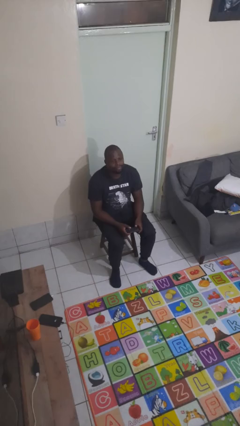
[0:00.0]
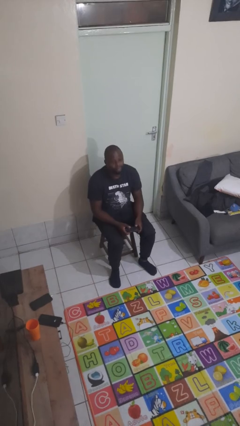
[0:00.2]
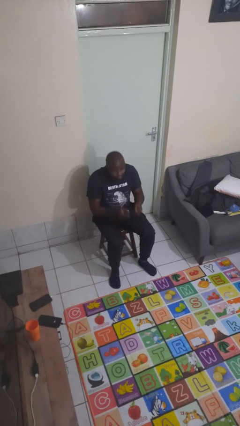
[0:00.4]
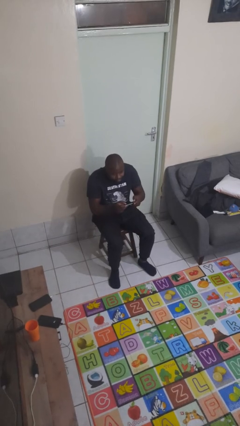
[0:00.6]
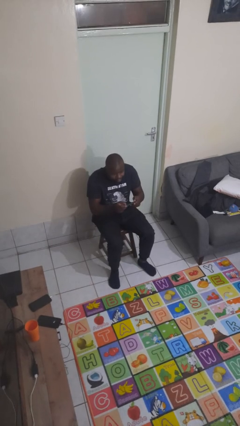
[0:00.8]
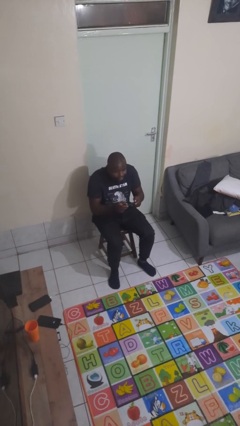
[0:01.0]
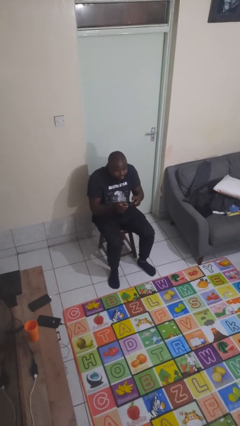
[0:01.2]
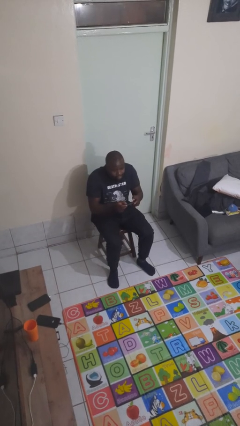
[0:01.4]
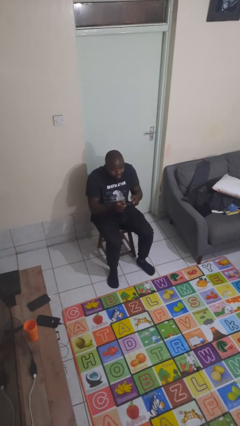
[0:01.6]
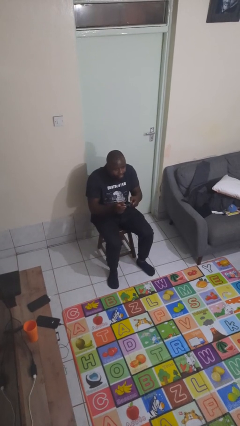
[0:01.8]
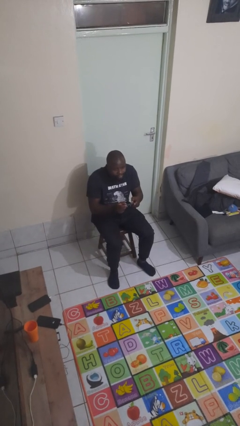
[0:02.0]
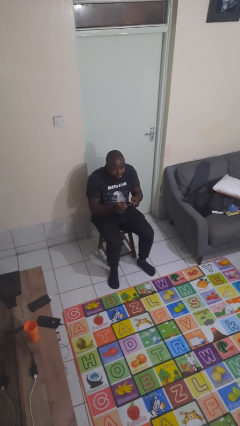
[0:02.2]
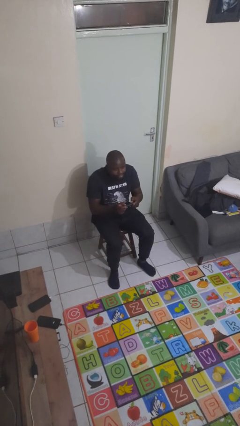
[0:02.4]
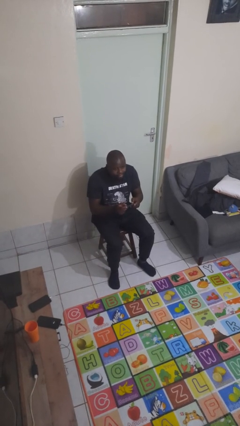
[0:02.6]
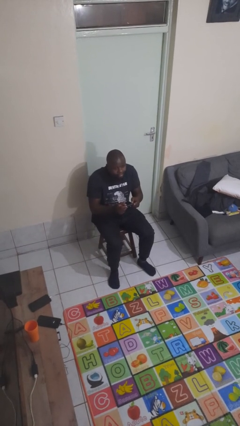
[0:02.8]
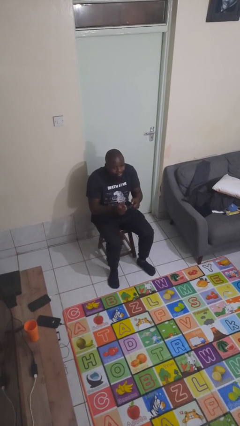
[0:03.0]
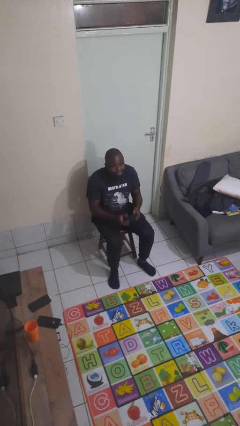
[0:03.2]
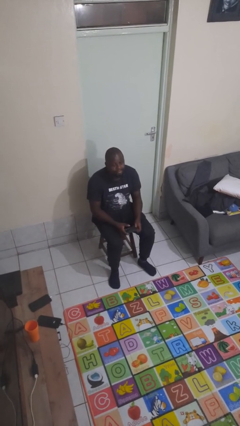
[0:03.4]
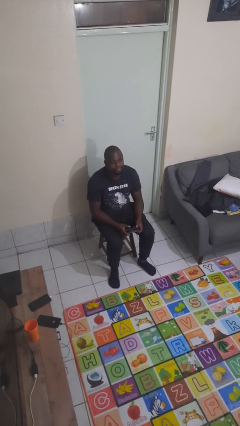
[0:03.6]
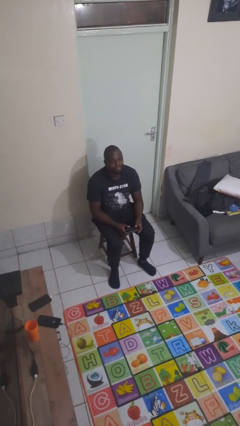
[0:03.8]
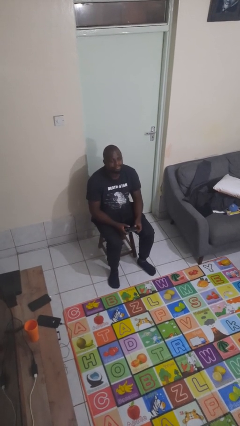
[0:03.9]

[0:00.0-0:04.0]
person interacts with handheld game

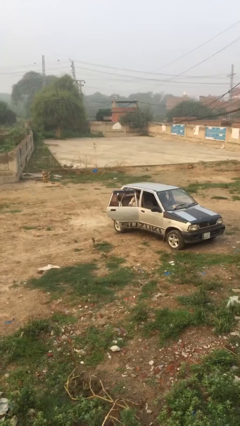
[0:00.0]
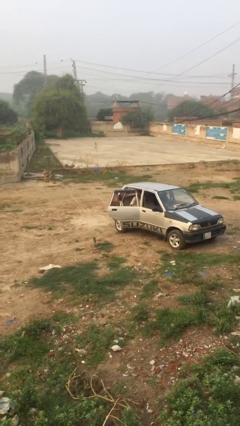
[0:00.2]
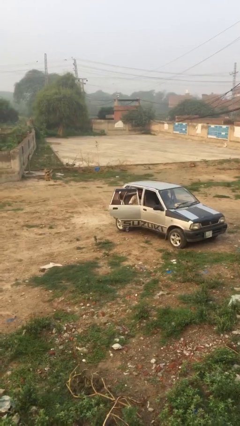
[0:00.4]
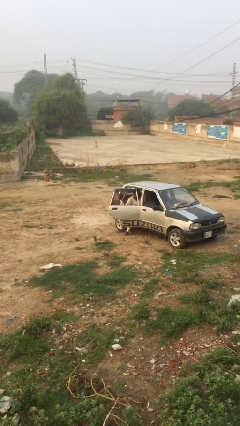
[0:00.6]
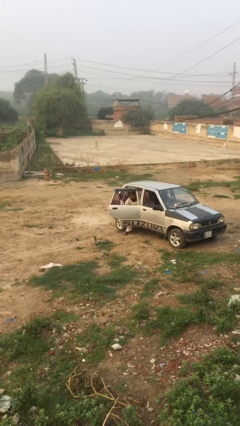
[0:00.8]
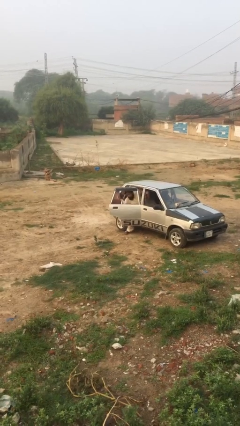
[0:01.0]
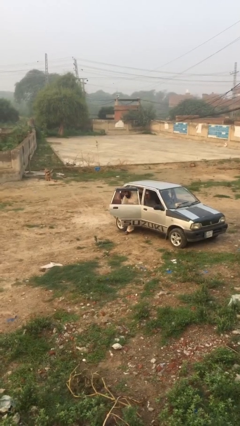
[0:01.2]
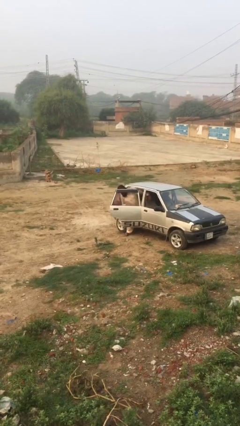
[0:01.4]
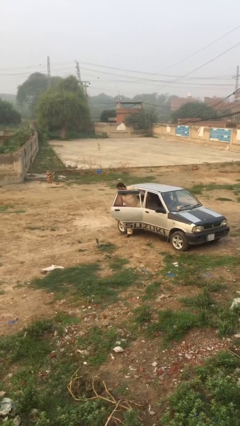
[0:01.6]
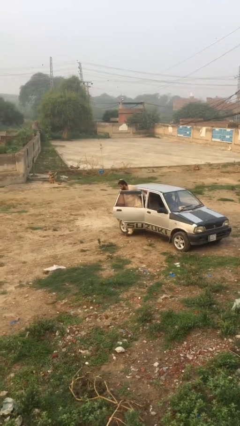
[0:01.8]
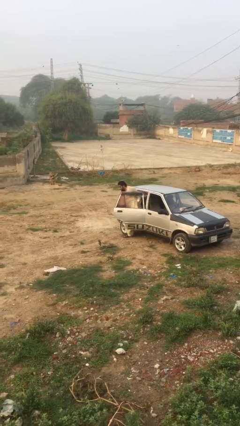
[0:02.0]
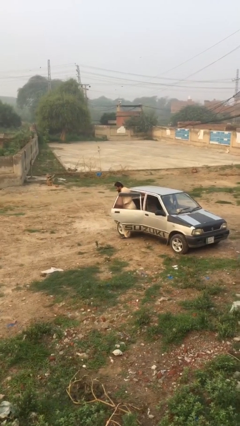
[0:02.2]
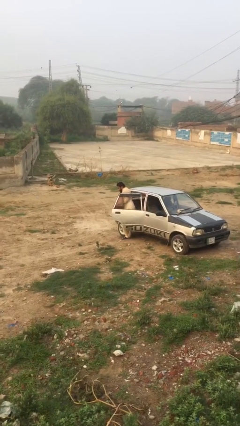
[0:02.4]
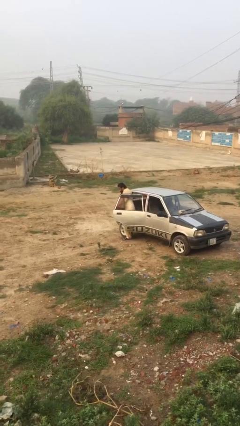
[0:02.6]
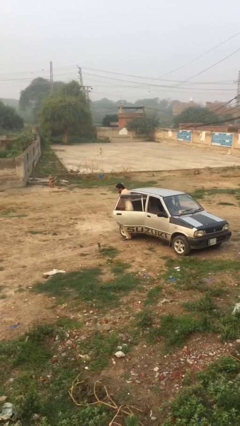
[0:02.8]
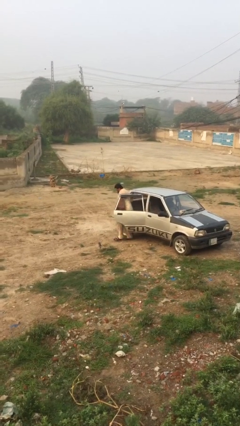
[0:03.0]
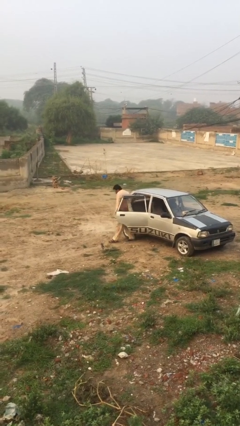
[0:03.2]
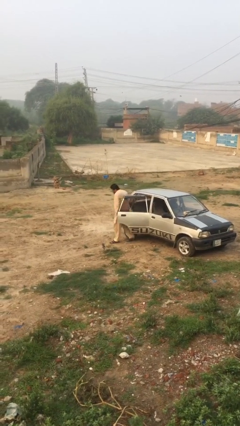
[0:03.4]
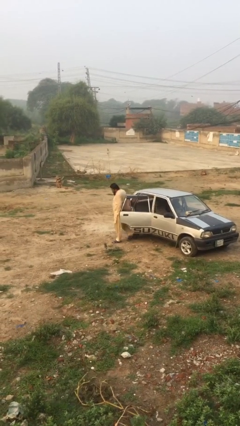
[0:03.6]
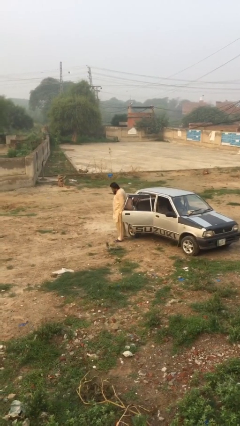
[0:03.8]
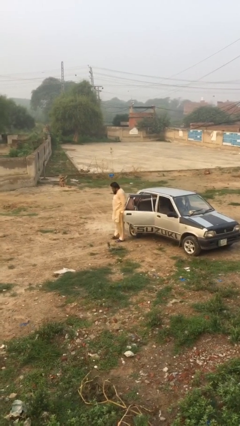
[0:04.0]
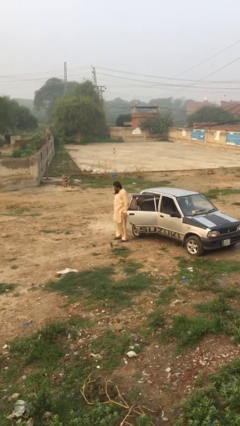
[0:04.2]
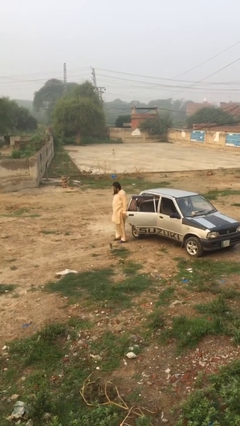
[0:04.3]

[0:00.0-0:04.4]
person exits car

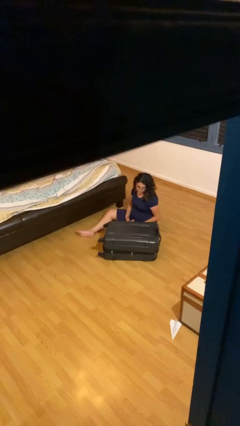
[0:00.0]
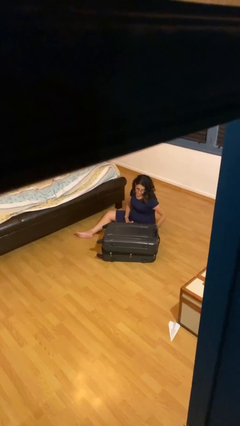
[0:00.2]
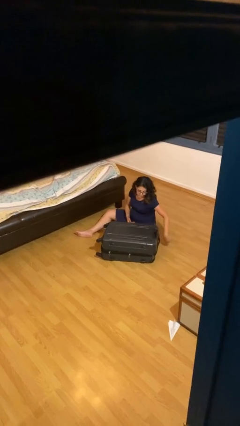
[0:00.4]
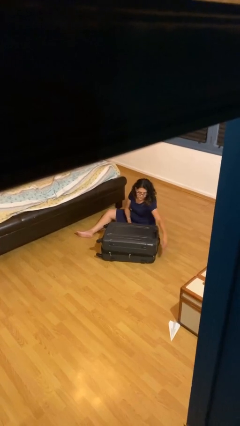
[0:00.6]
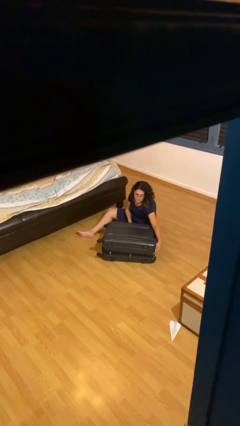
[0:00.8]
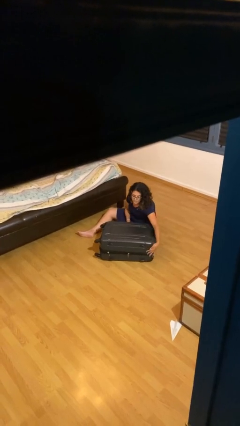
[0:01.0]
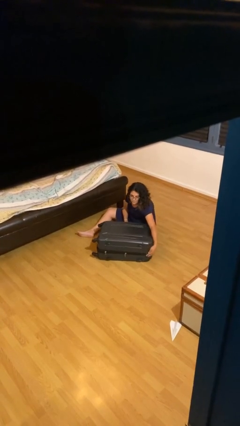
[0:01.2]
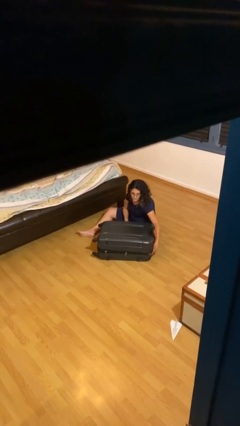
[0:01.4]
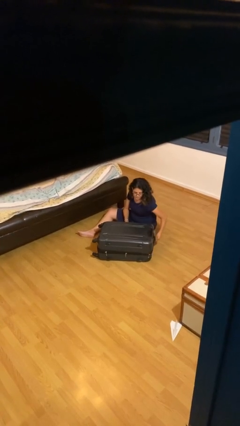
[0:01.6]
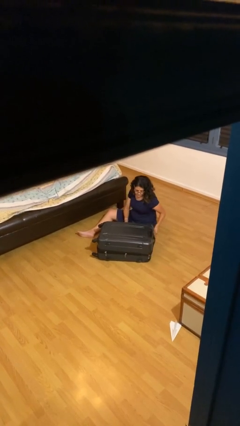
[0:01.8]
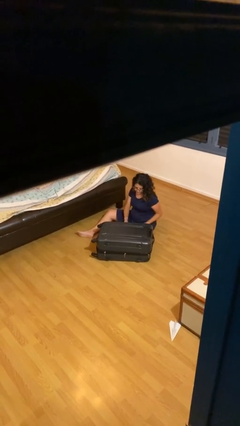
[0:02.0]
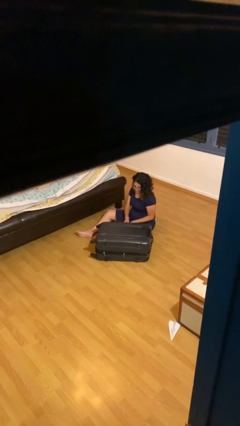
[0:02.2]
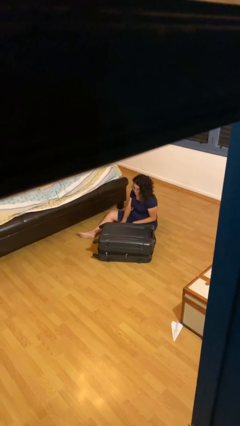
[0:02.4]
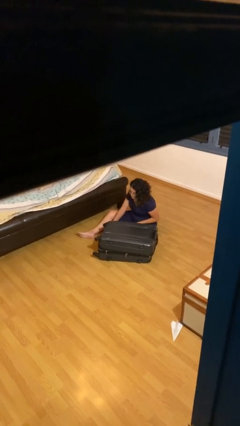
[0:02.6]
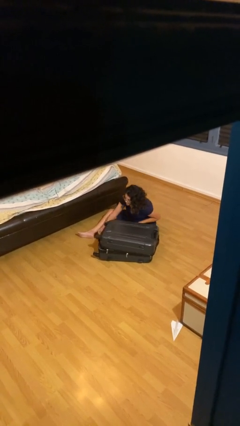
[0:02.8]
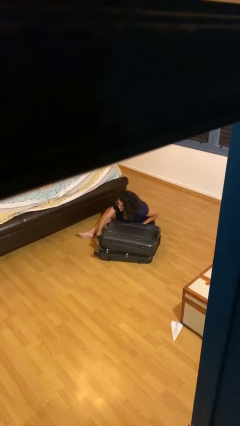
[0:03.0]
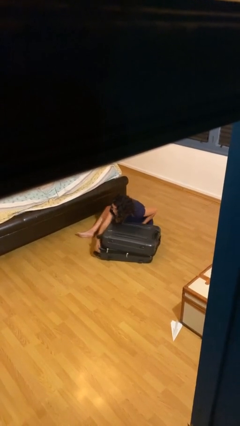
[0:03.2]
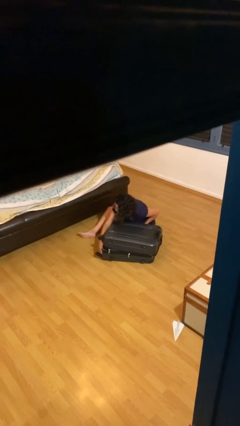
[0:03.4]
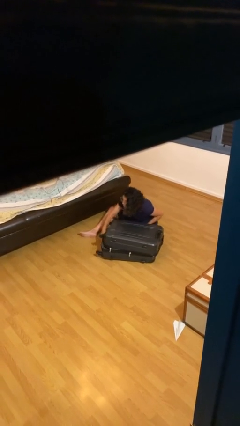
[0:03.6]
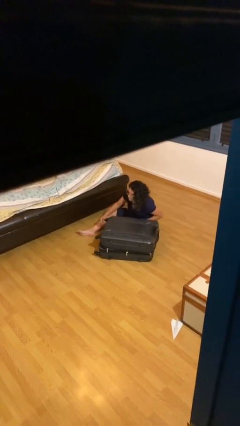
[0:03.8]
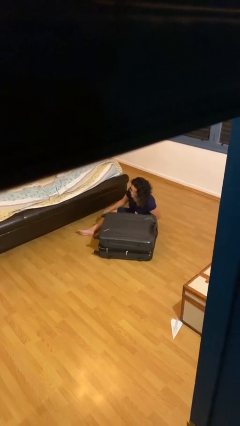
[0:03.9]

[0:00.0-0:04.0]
person opens suitcase

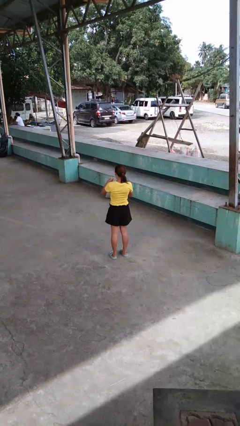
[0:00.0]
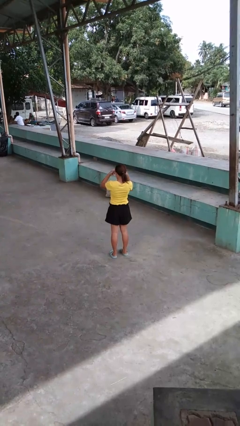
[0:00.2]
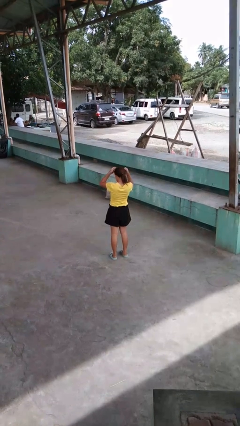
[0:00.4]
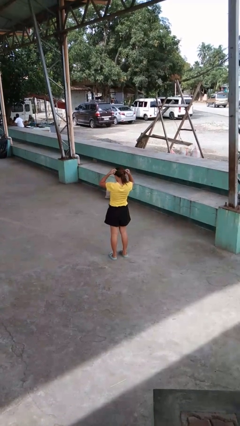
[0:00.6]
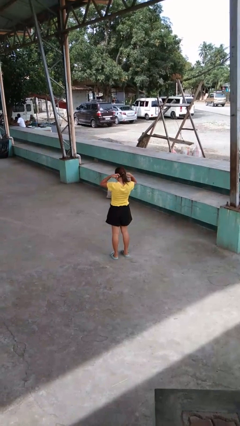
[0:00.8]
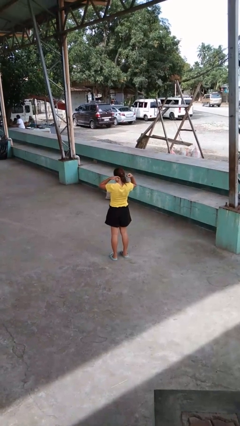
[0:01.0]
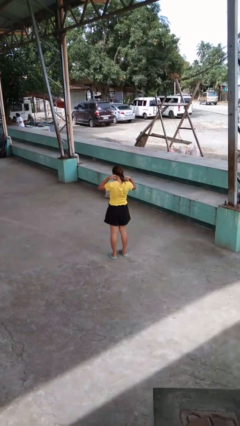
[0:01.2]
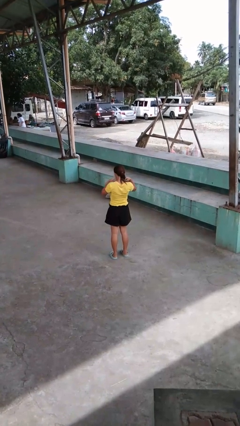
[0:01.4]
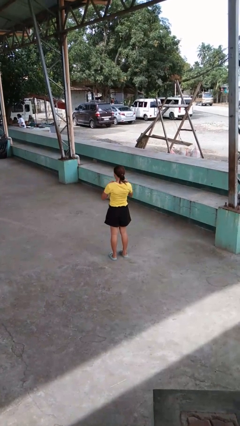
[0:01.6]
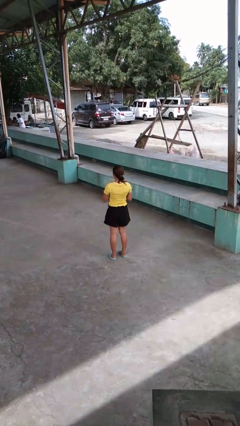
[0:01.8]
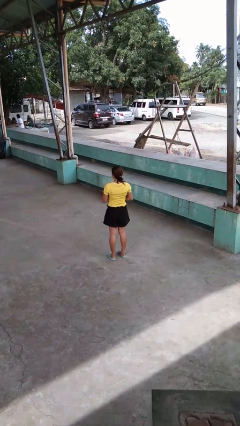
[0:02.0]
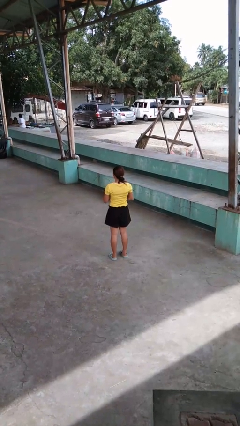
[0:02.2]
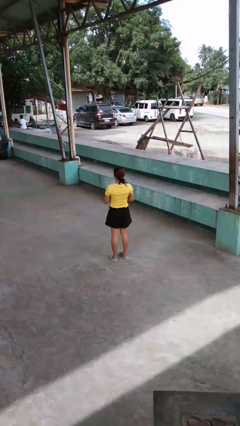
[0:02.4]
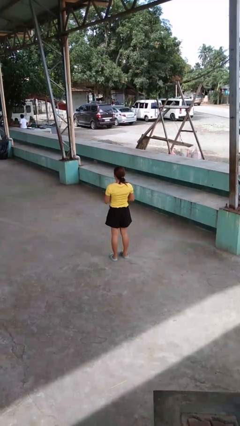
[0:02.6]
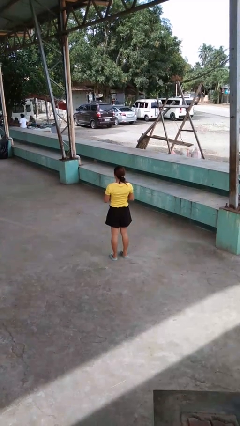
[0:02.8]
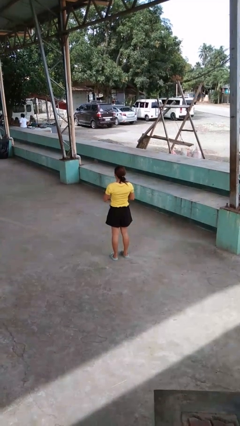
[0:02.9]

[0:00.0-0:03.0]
person puts on necklace

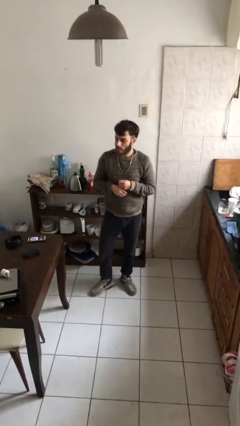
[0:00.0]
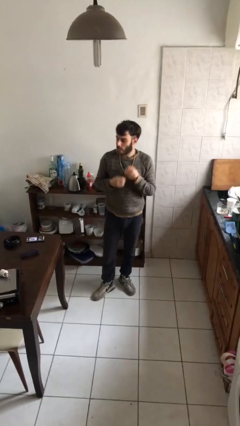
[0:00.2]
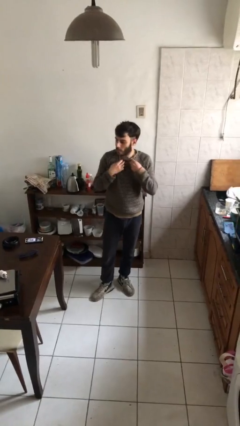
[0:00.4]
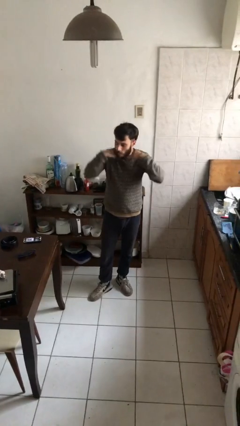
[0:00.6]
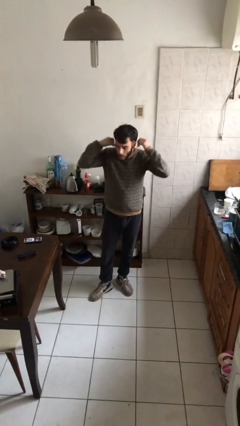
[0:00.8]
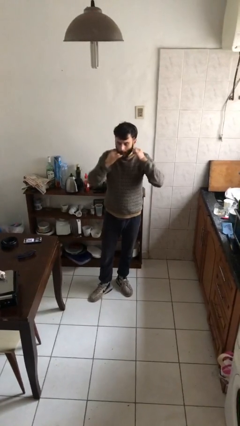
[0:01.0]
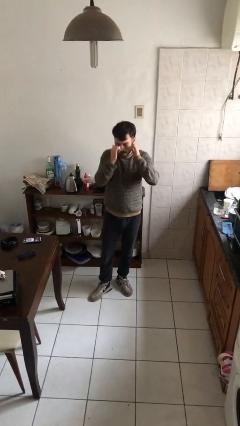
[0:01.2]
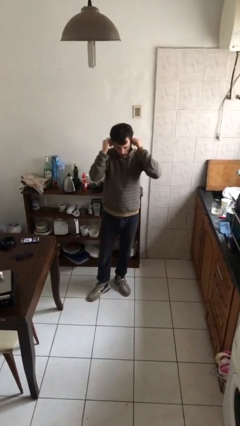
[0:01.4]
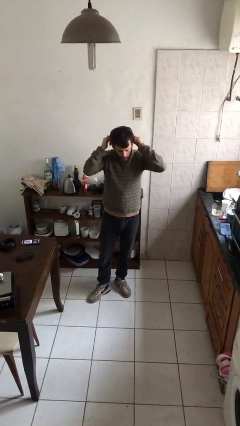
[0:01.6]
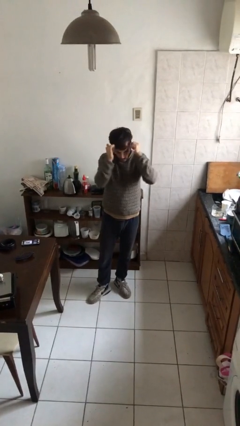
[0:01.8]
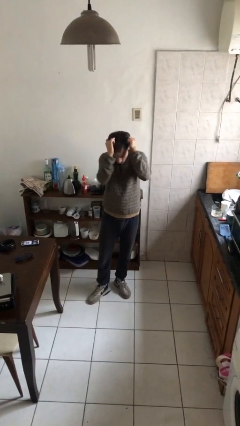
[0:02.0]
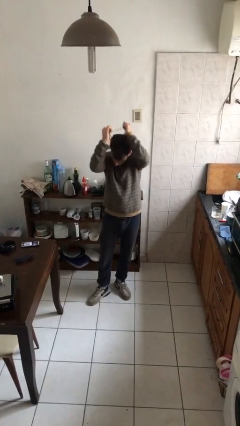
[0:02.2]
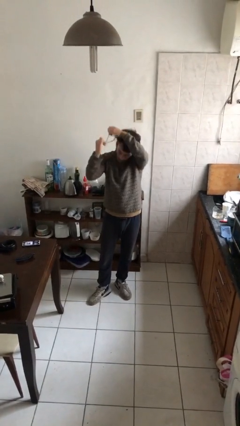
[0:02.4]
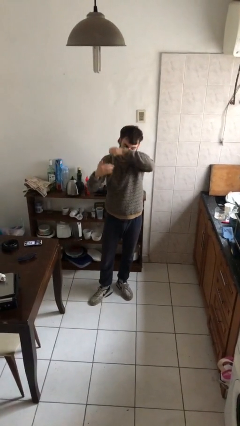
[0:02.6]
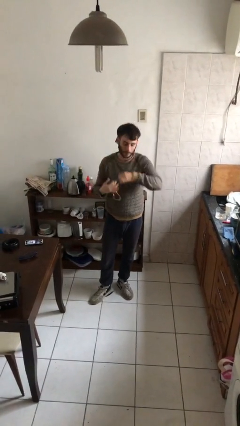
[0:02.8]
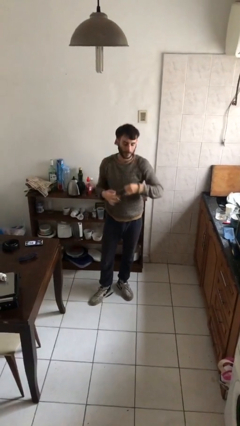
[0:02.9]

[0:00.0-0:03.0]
person takes off necklace
